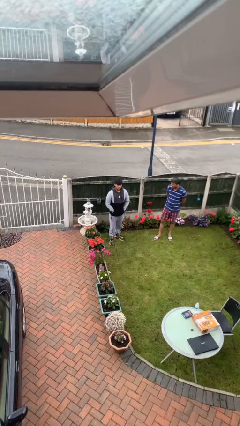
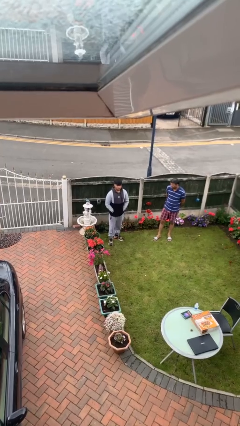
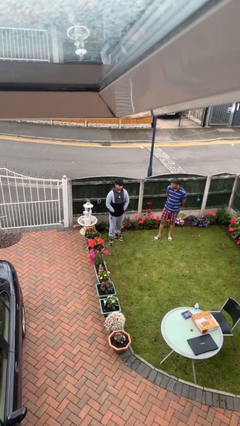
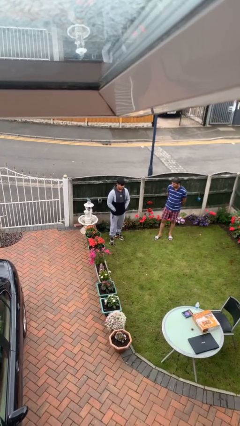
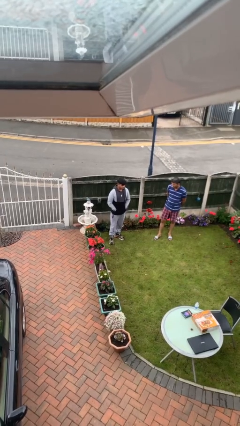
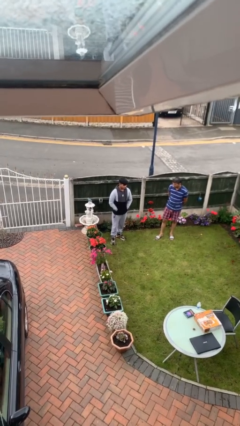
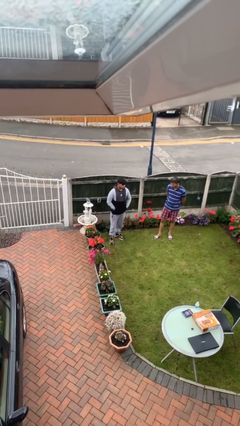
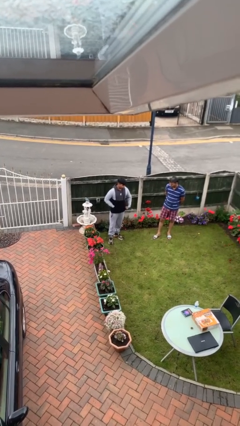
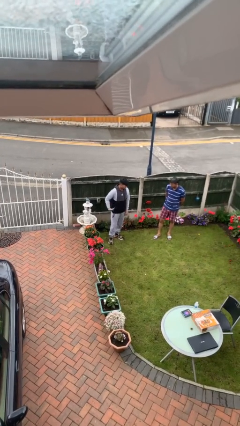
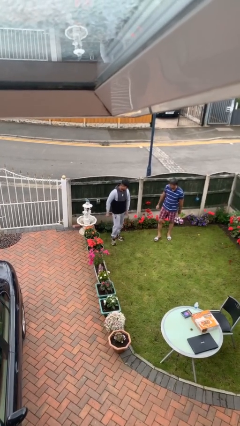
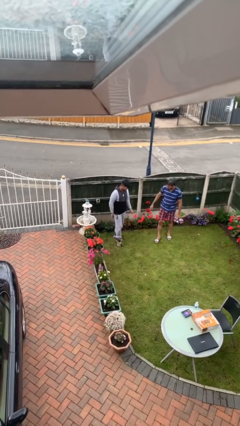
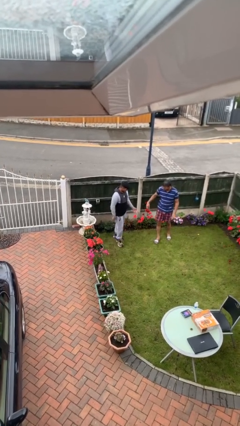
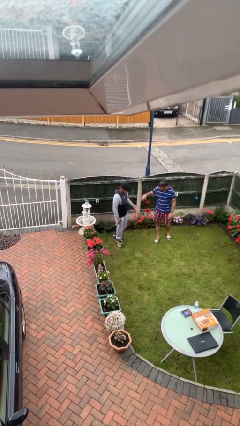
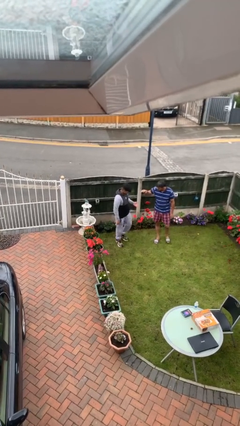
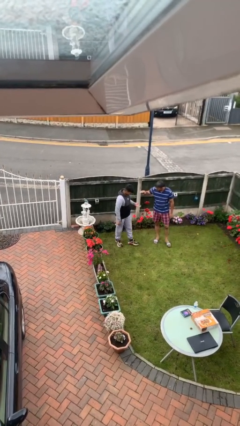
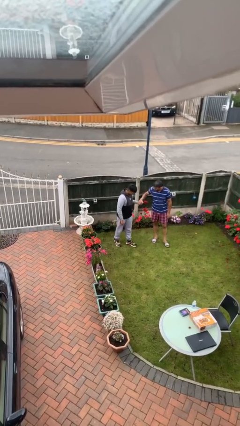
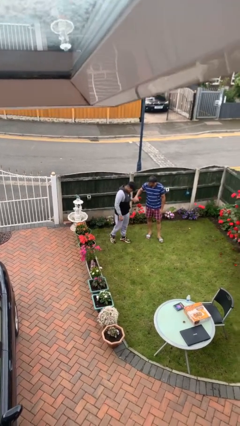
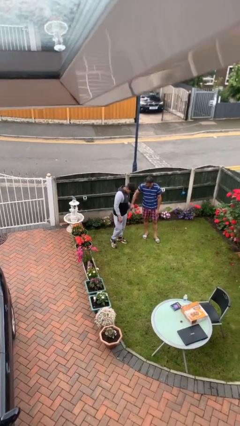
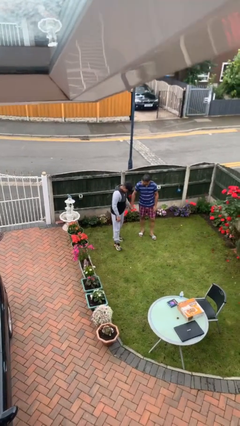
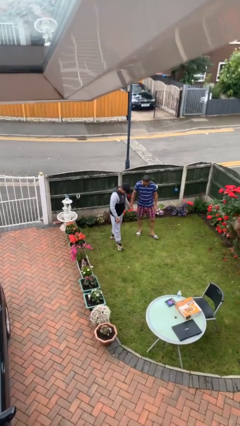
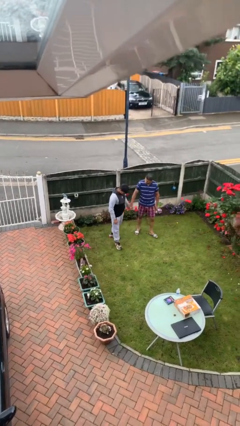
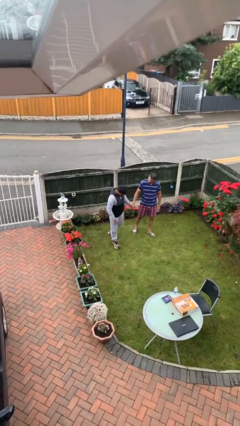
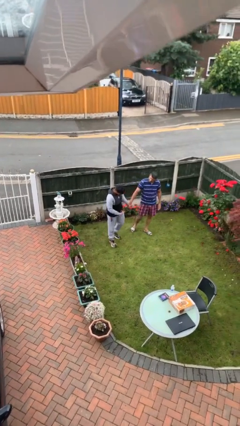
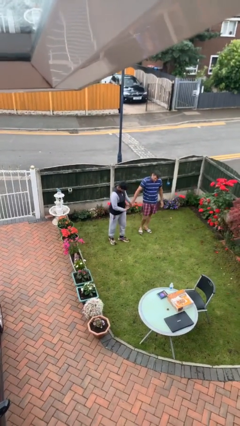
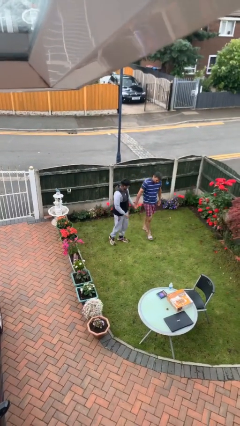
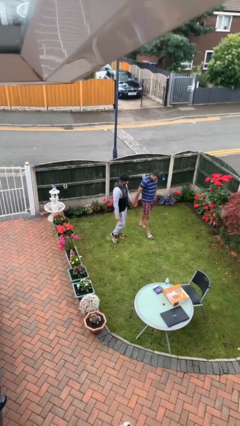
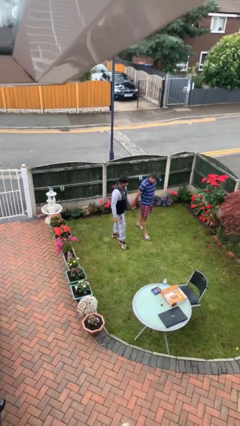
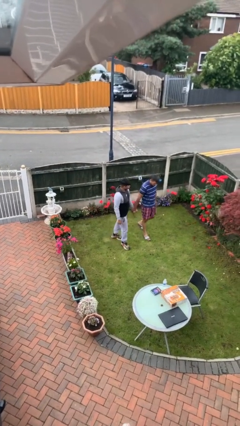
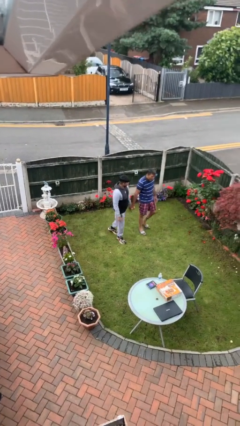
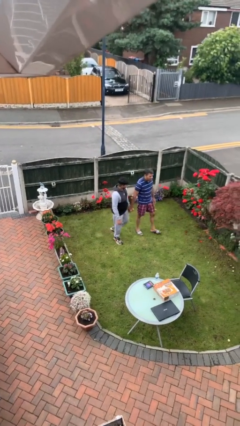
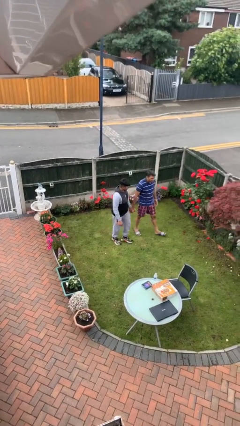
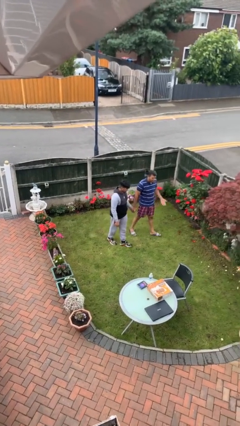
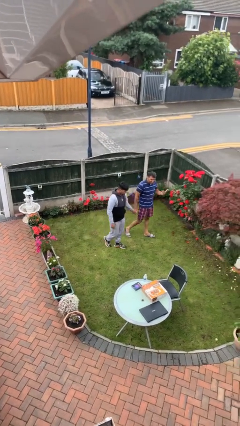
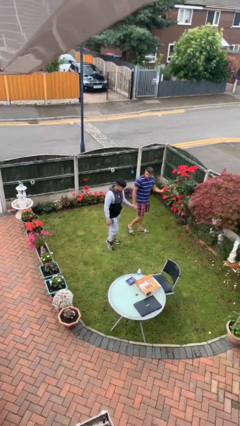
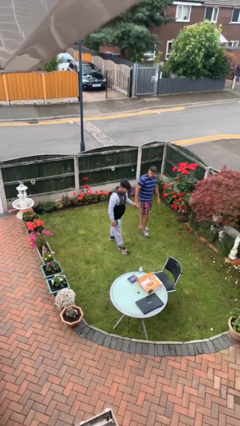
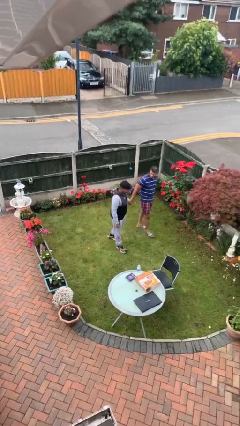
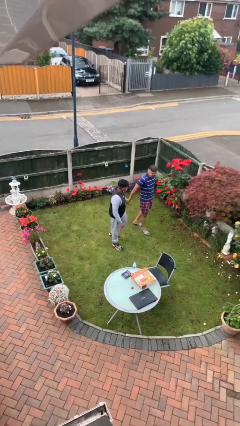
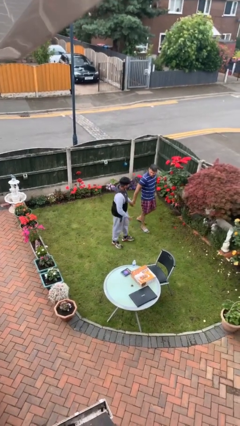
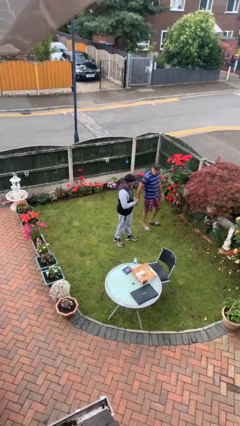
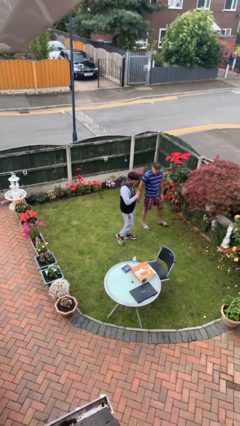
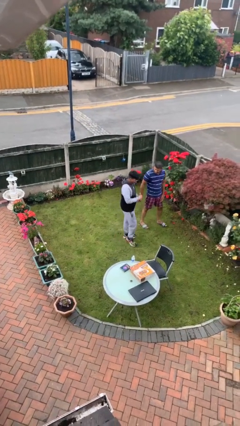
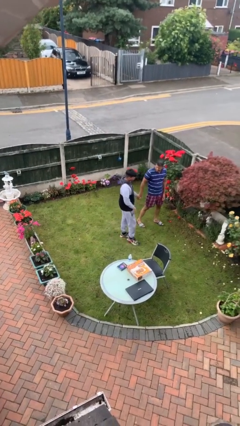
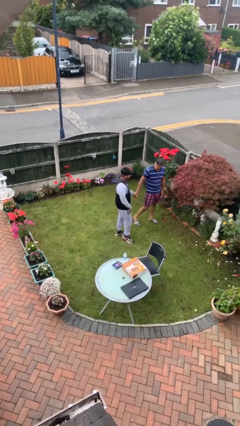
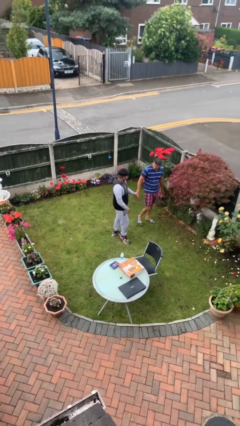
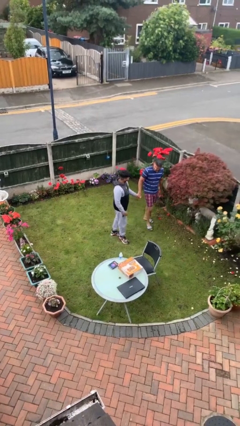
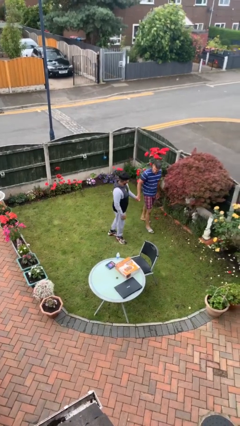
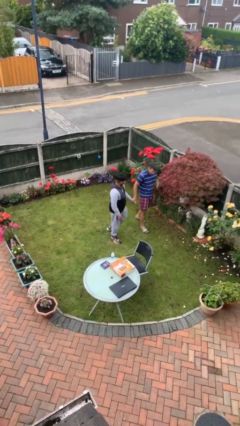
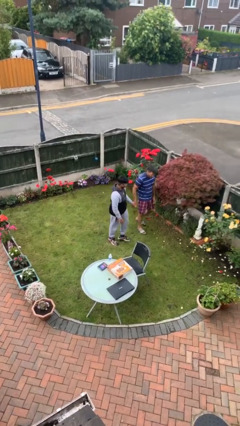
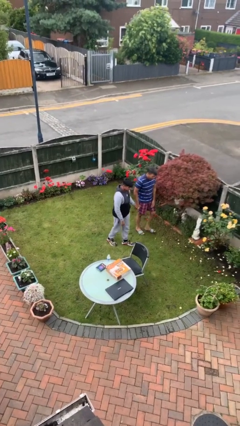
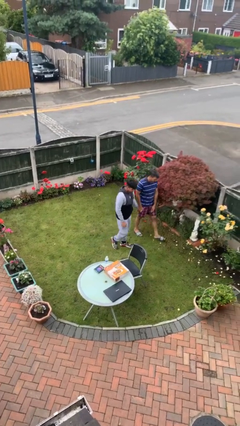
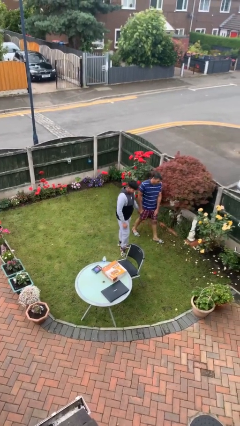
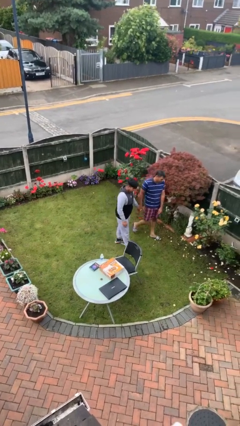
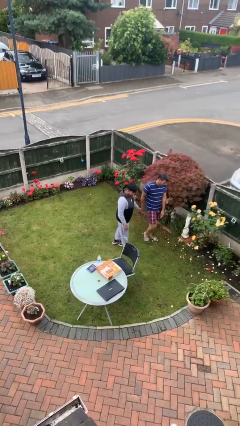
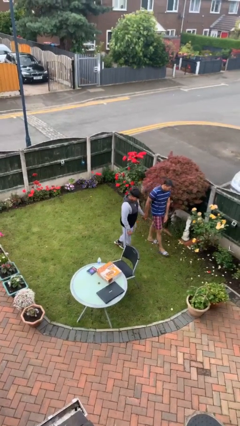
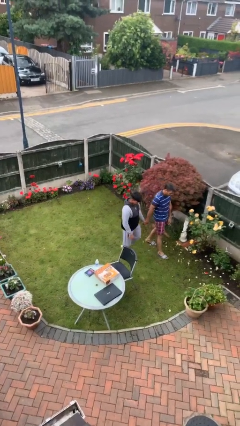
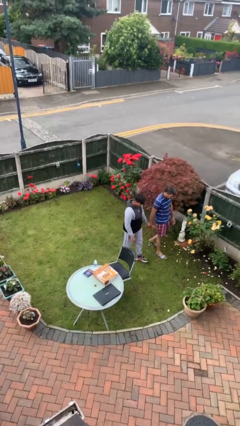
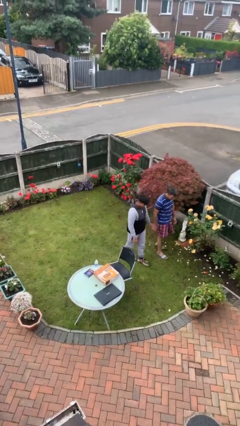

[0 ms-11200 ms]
person holds hand

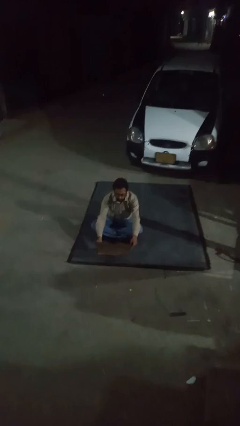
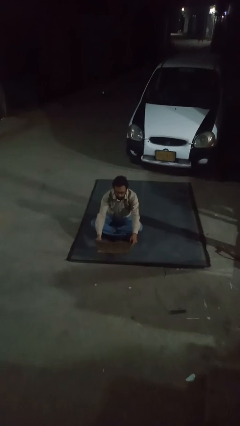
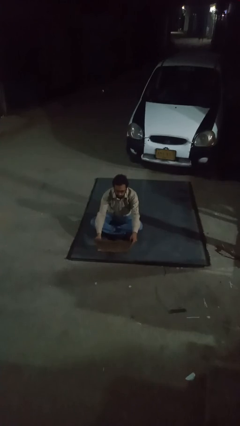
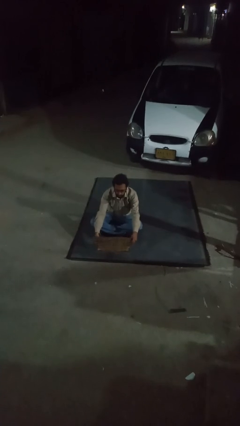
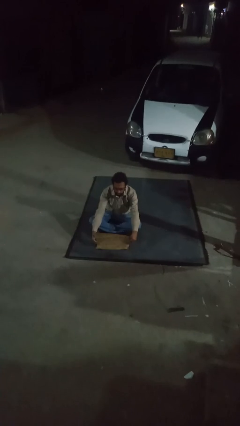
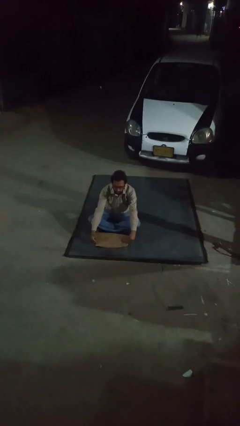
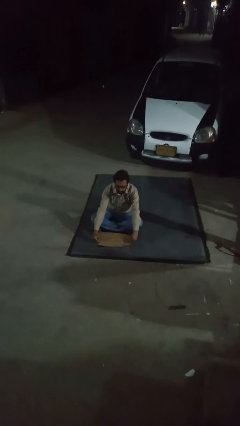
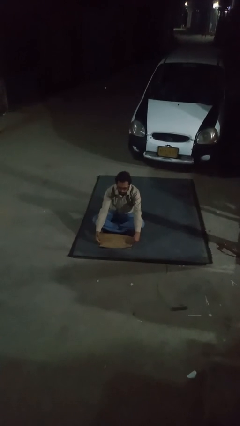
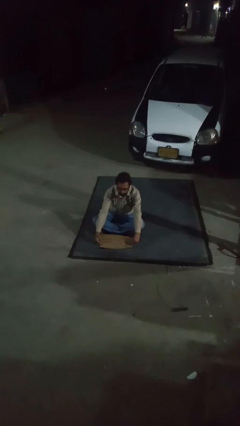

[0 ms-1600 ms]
person closes laptop

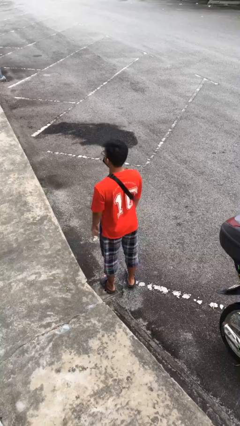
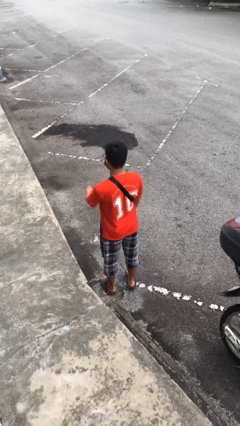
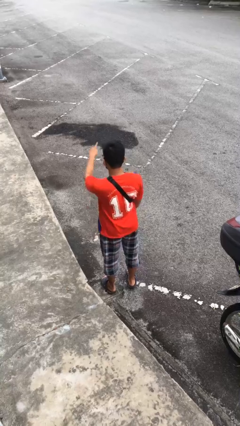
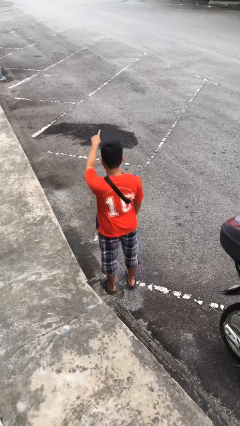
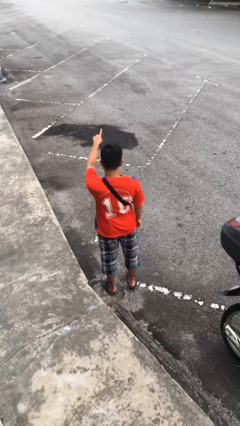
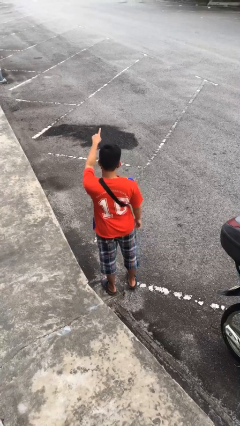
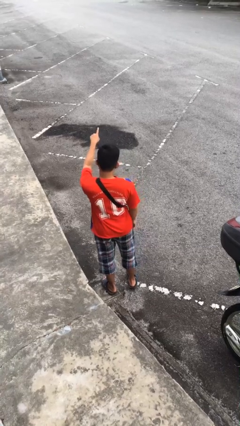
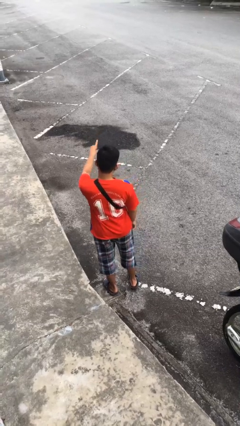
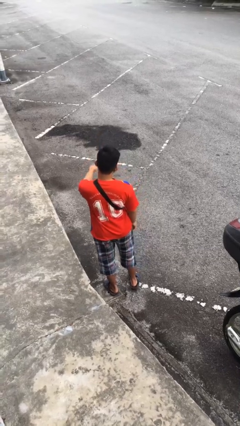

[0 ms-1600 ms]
person points at person

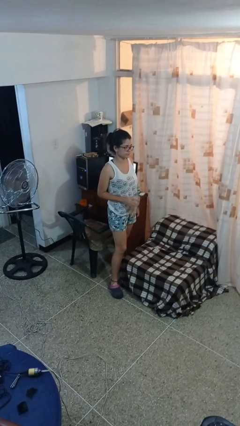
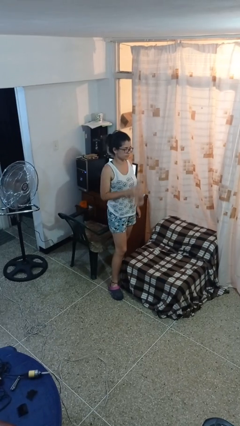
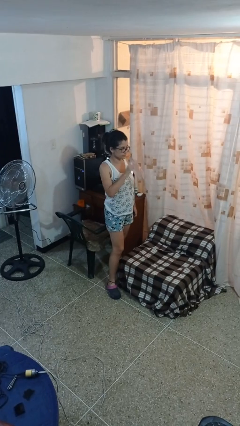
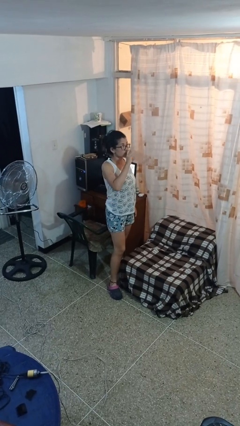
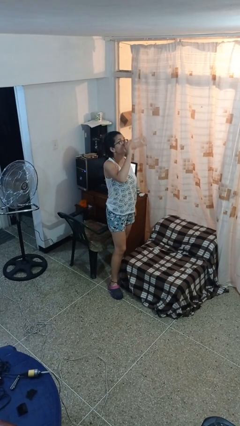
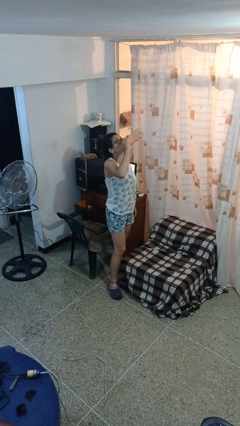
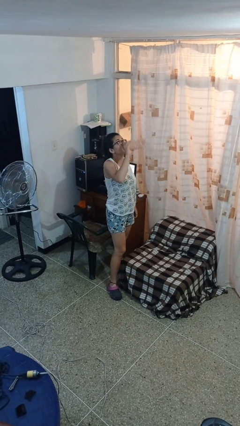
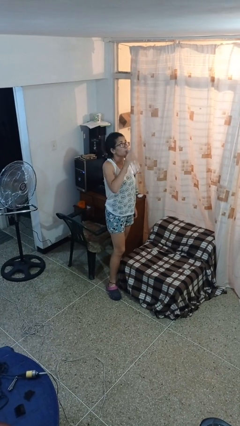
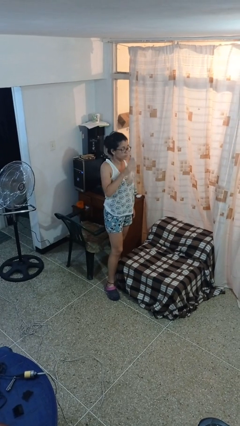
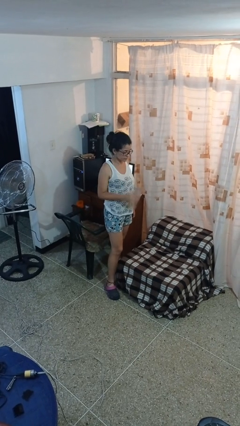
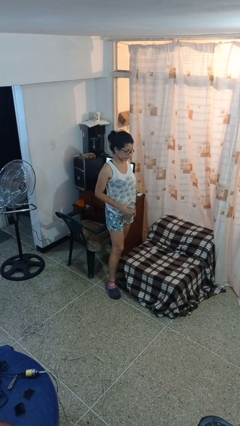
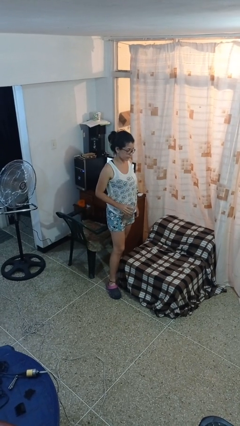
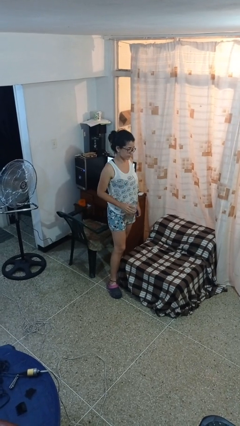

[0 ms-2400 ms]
person drinks from bottle

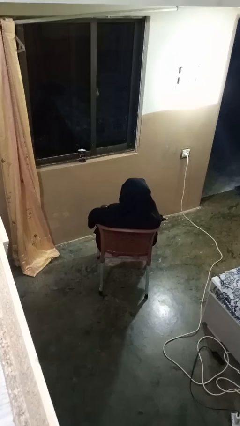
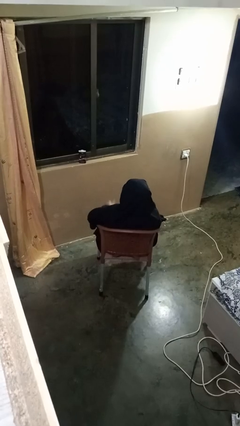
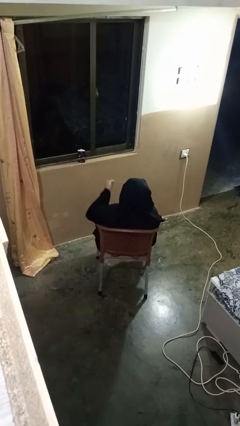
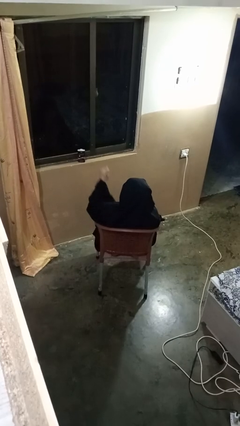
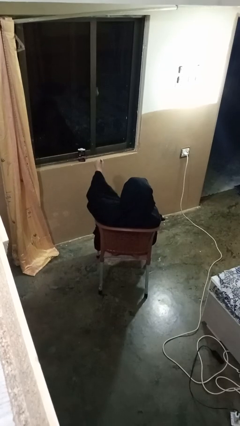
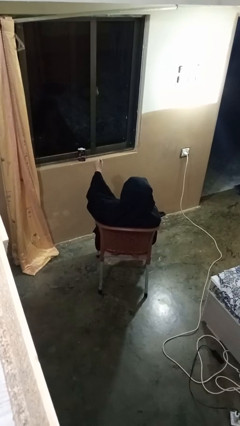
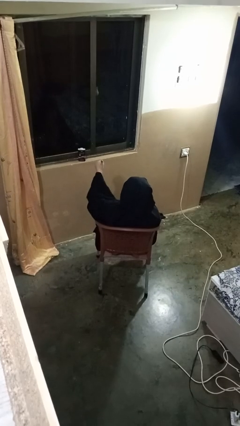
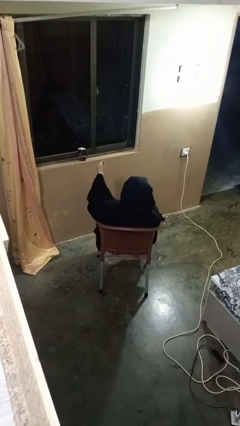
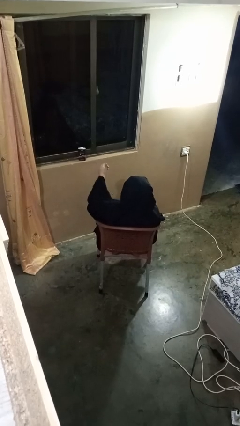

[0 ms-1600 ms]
person gestures thumbs up
